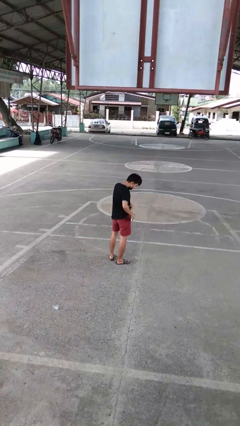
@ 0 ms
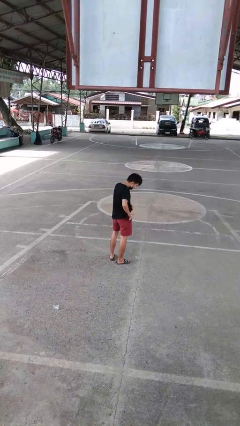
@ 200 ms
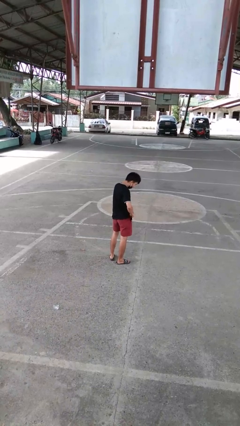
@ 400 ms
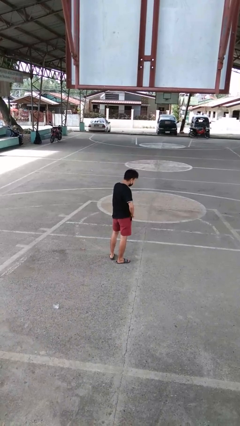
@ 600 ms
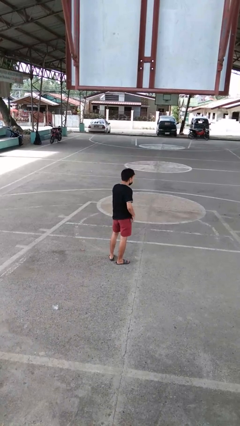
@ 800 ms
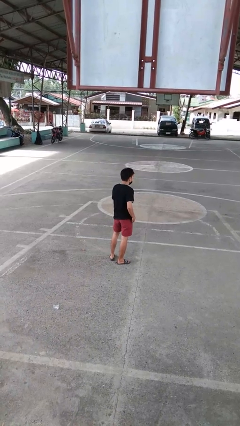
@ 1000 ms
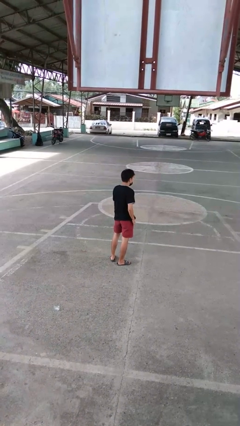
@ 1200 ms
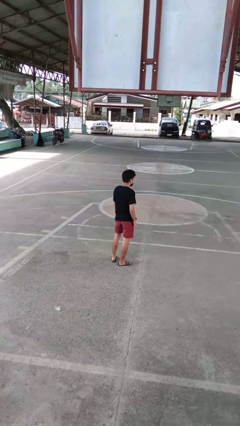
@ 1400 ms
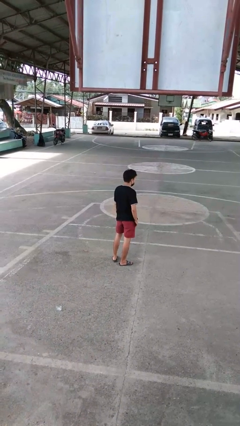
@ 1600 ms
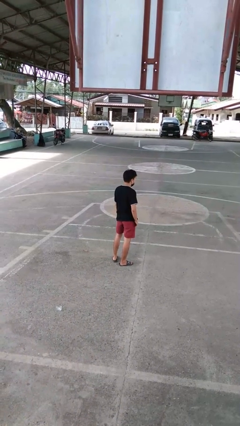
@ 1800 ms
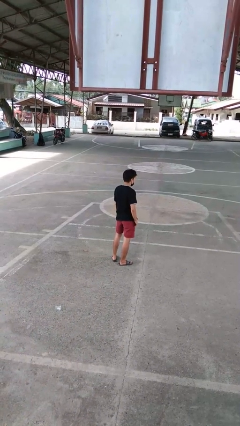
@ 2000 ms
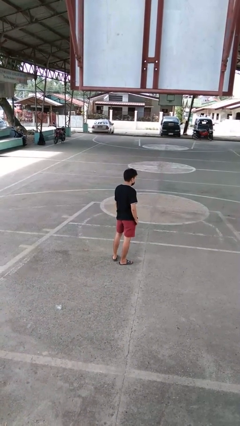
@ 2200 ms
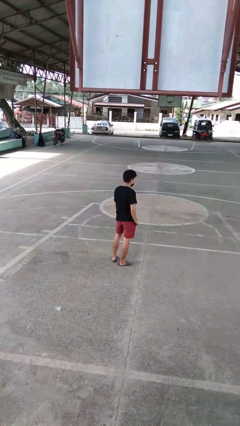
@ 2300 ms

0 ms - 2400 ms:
person puts phone into pocket

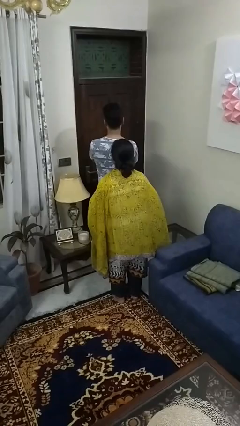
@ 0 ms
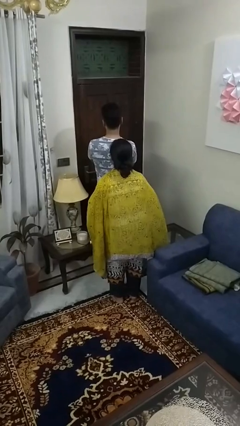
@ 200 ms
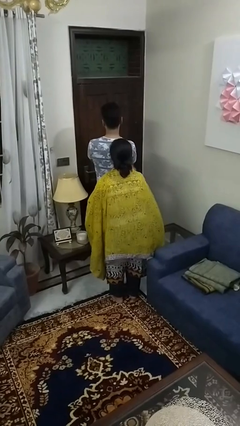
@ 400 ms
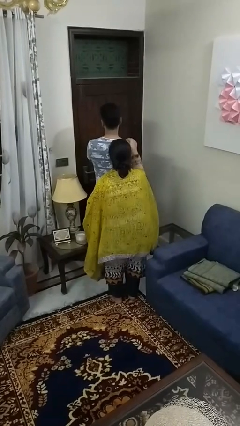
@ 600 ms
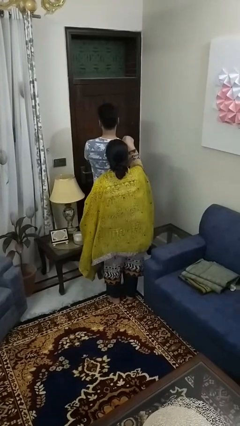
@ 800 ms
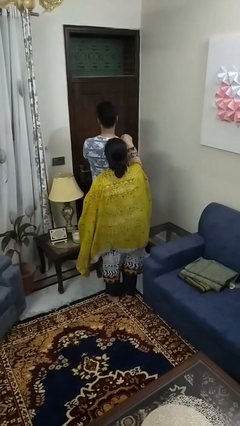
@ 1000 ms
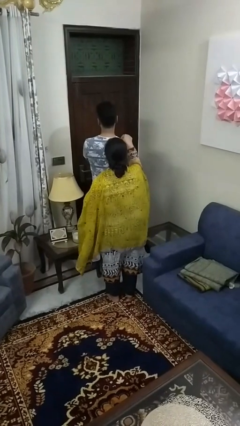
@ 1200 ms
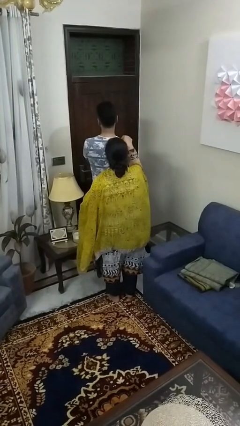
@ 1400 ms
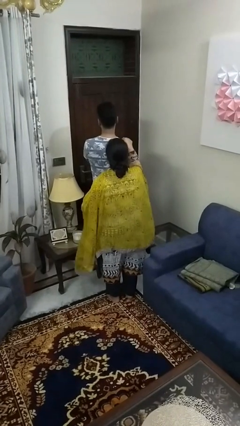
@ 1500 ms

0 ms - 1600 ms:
person touches back of person

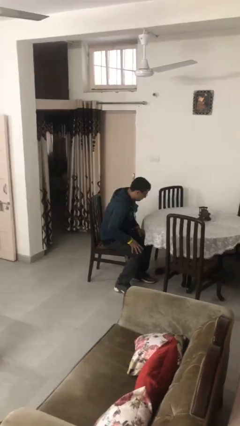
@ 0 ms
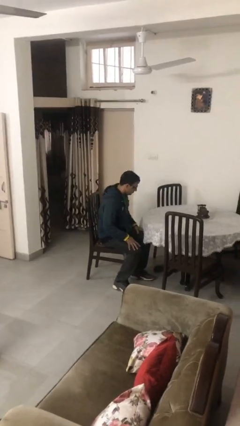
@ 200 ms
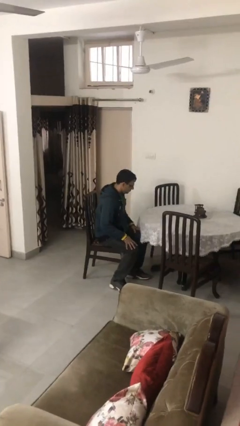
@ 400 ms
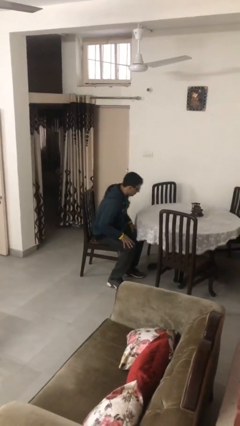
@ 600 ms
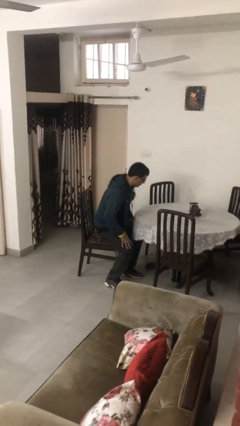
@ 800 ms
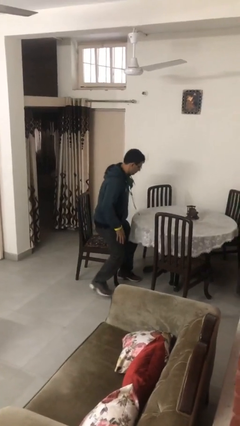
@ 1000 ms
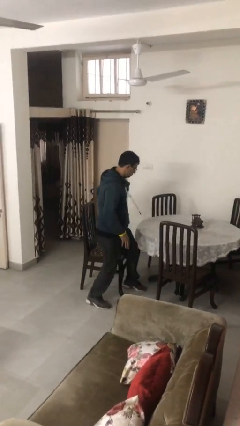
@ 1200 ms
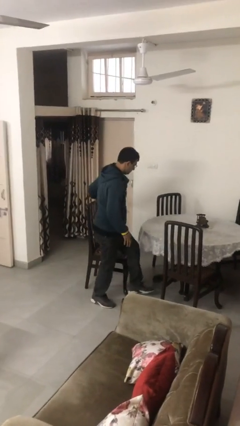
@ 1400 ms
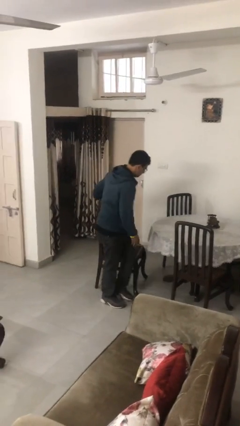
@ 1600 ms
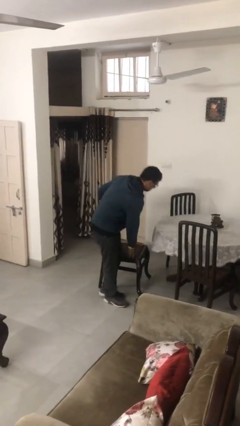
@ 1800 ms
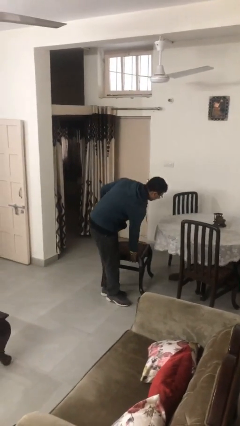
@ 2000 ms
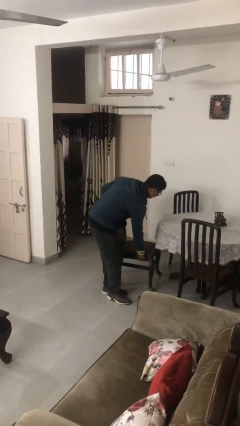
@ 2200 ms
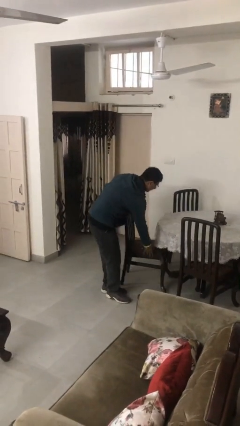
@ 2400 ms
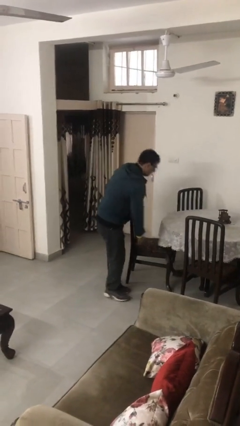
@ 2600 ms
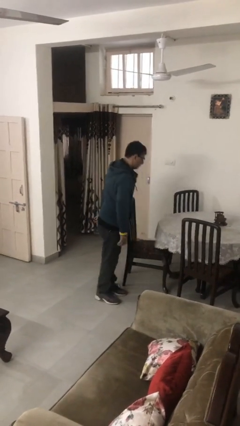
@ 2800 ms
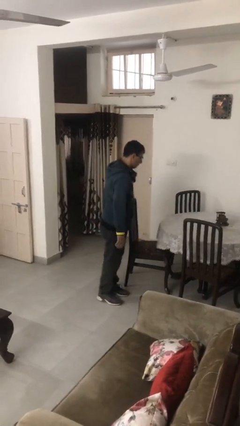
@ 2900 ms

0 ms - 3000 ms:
person stands up

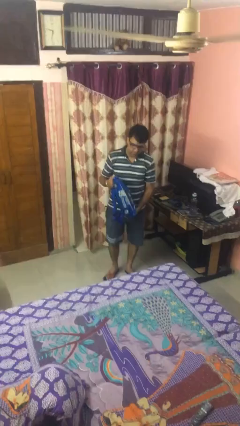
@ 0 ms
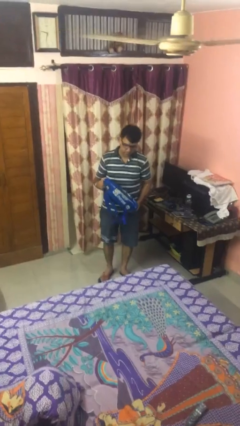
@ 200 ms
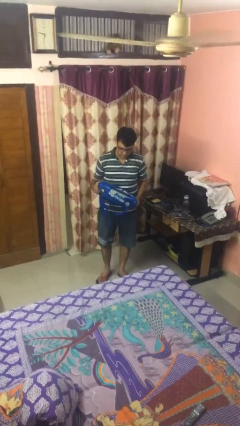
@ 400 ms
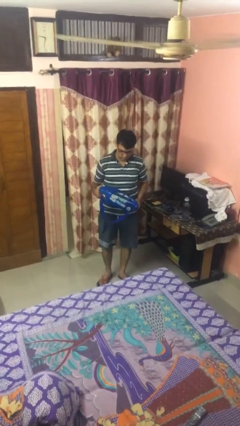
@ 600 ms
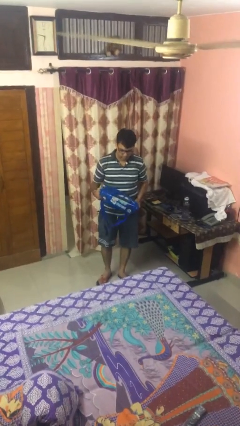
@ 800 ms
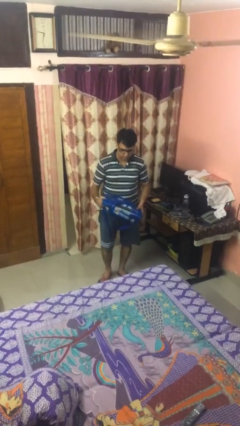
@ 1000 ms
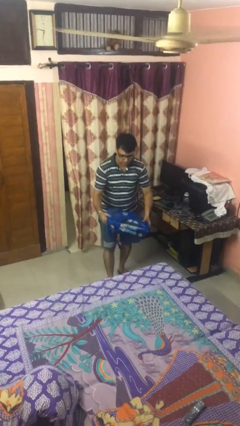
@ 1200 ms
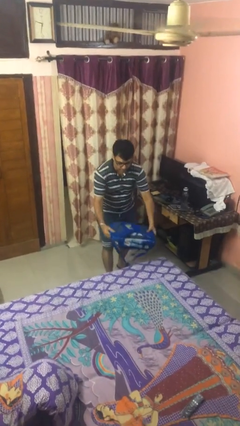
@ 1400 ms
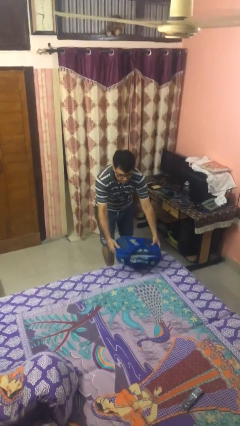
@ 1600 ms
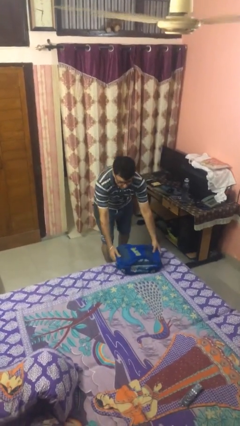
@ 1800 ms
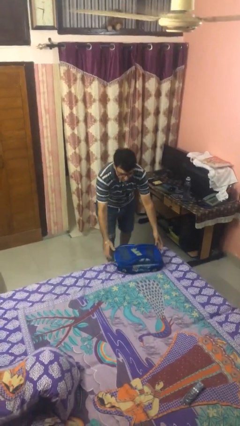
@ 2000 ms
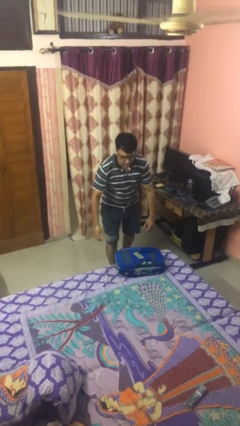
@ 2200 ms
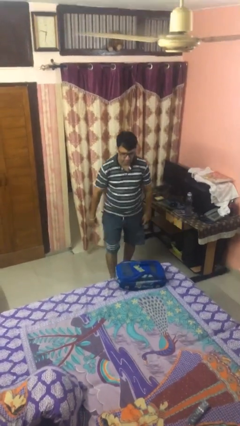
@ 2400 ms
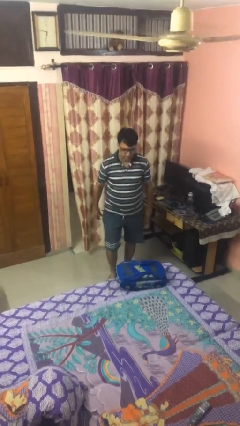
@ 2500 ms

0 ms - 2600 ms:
person puts down object on bed

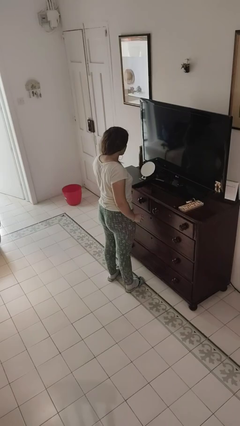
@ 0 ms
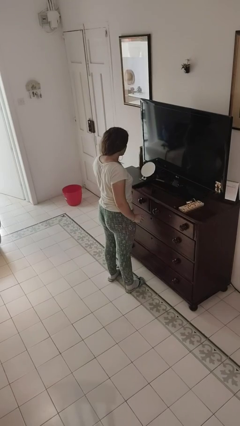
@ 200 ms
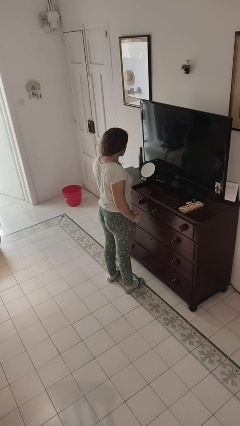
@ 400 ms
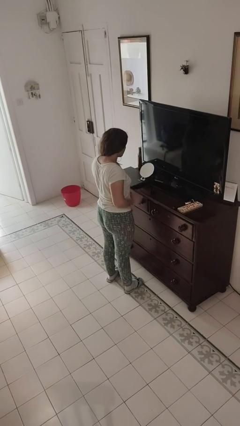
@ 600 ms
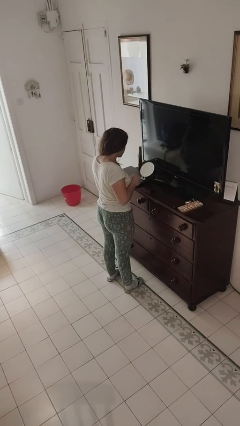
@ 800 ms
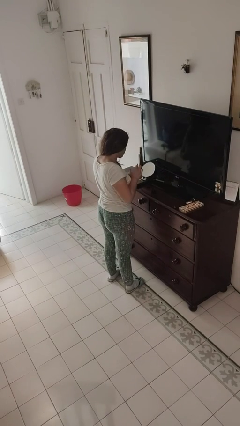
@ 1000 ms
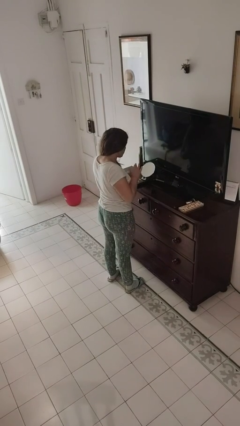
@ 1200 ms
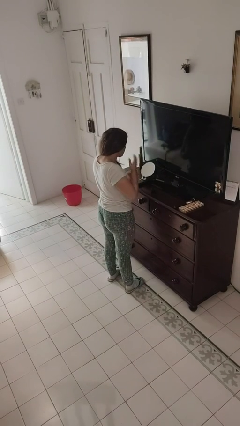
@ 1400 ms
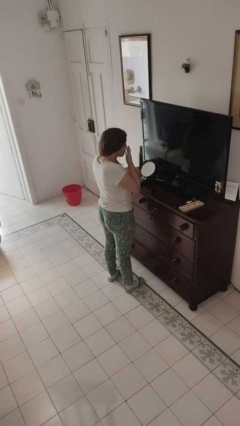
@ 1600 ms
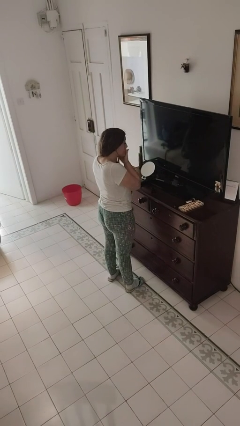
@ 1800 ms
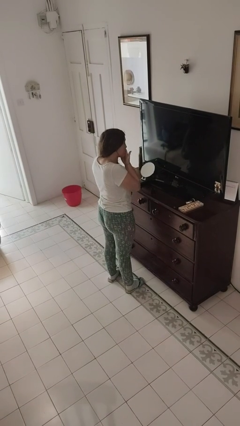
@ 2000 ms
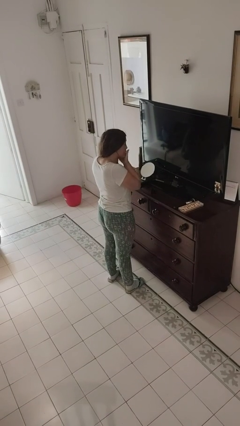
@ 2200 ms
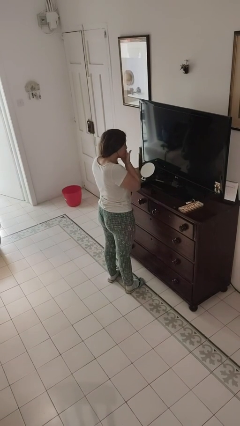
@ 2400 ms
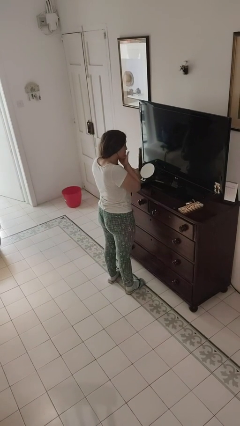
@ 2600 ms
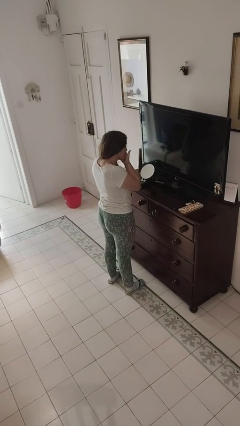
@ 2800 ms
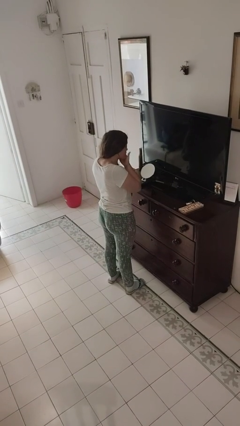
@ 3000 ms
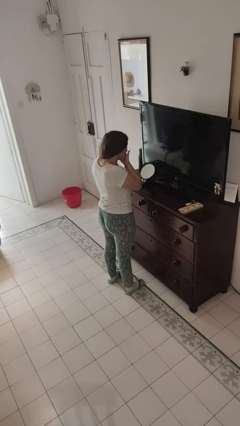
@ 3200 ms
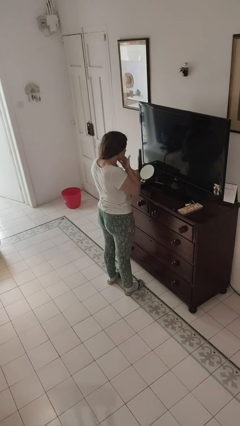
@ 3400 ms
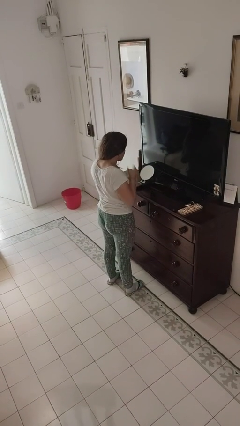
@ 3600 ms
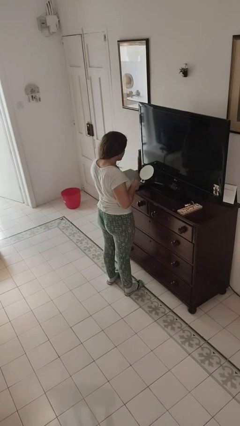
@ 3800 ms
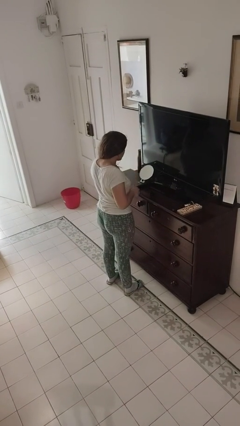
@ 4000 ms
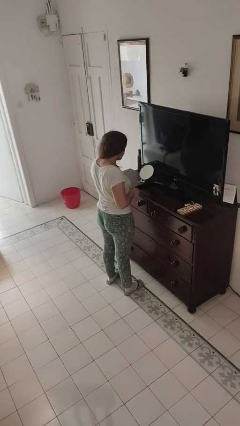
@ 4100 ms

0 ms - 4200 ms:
person applies foundation makeup

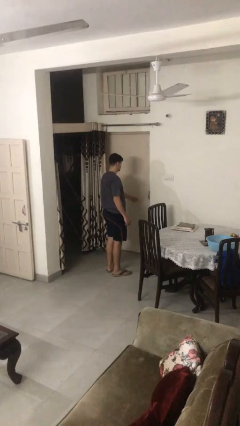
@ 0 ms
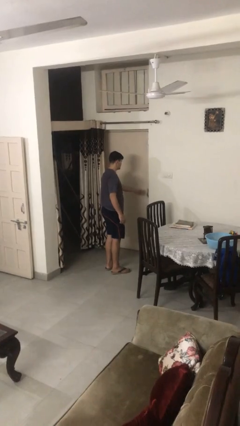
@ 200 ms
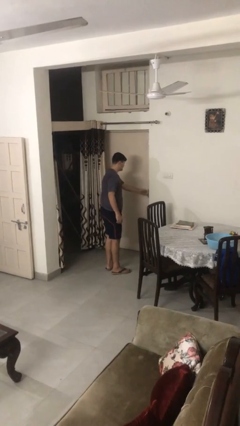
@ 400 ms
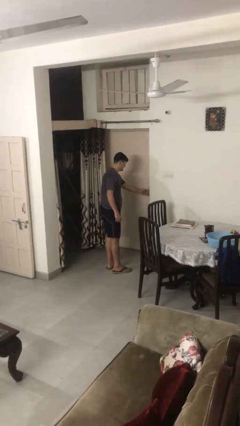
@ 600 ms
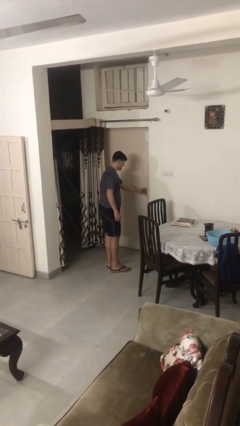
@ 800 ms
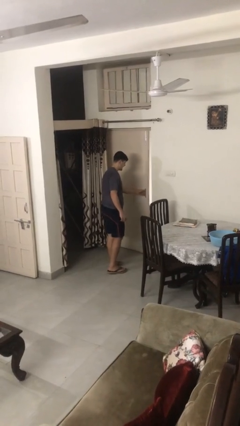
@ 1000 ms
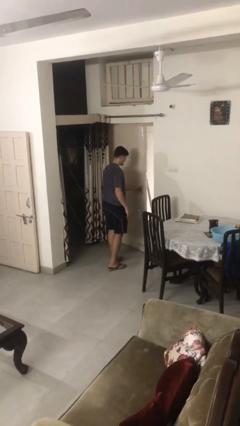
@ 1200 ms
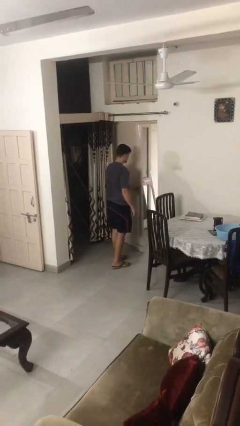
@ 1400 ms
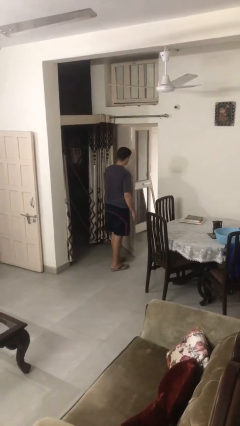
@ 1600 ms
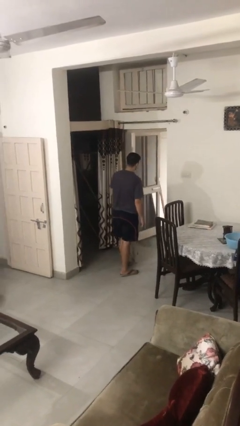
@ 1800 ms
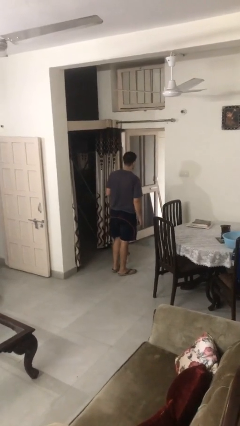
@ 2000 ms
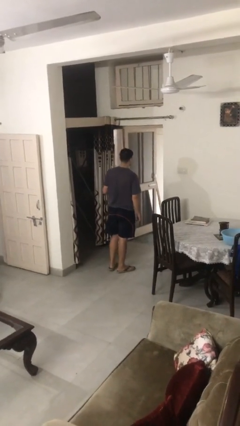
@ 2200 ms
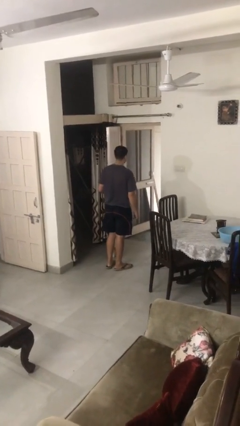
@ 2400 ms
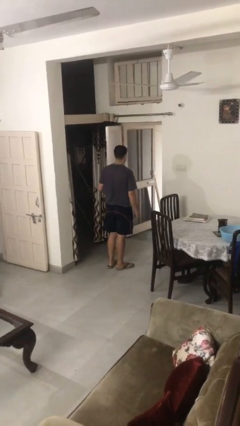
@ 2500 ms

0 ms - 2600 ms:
person opens facility door

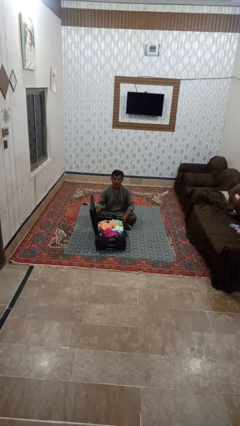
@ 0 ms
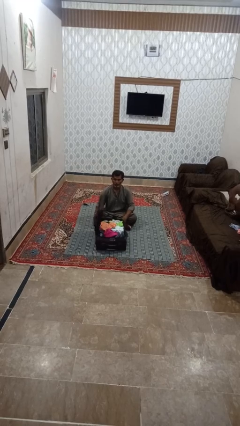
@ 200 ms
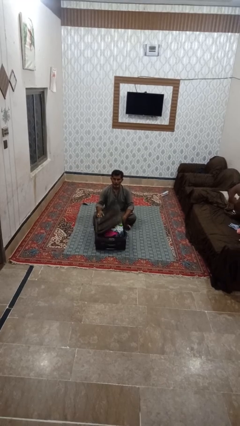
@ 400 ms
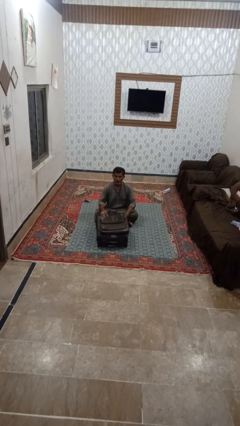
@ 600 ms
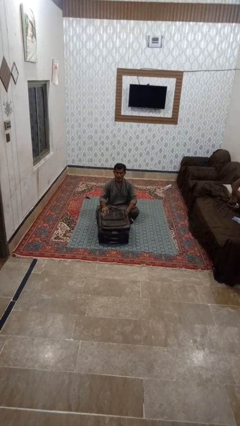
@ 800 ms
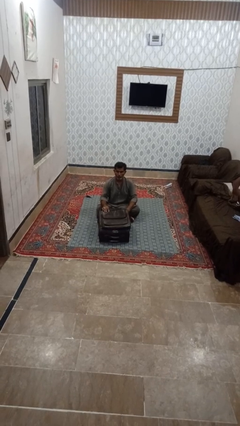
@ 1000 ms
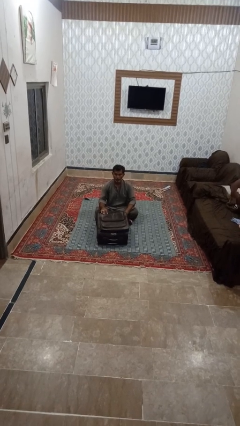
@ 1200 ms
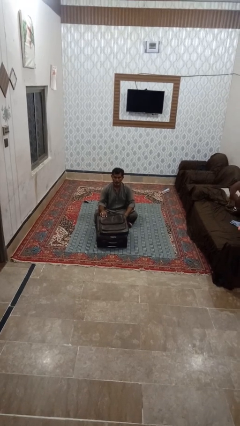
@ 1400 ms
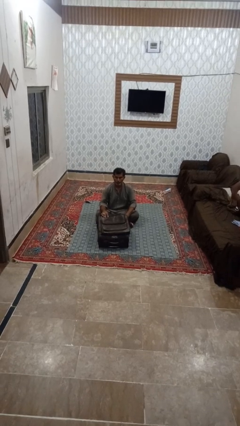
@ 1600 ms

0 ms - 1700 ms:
person closes clothes washer
